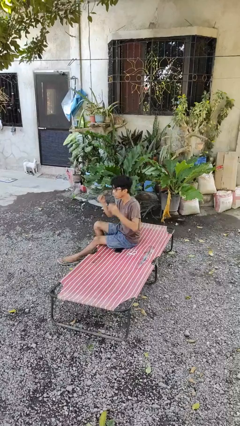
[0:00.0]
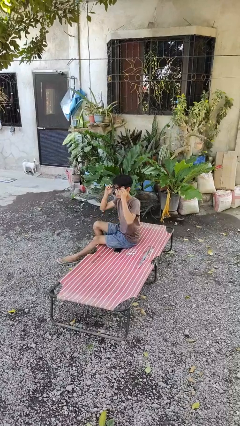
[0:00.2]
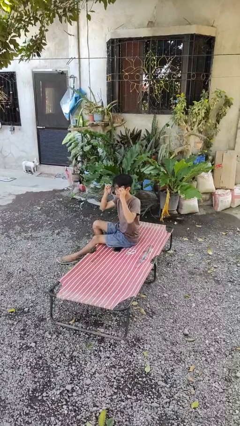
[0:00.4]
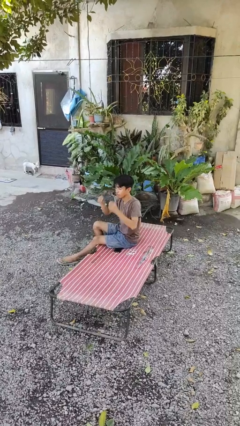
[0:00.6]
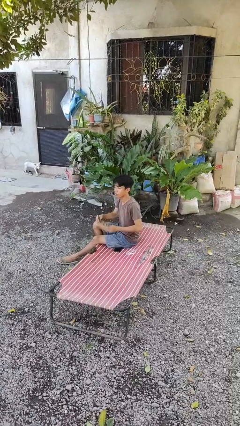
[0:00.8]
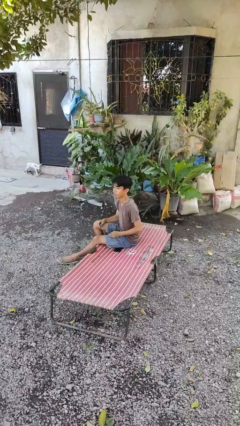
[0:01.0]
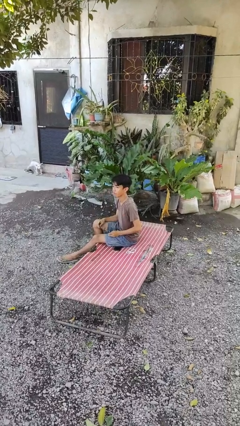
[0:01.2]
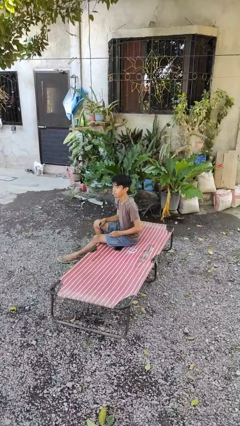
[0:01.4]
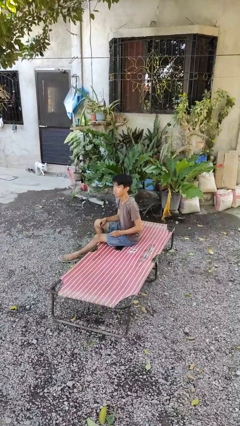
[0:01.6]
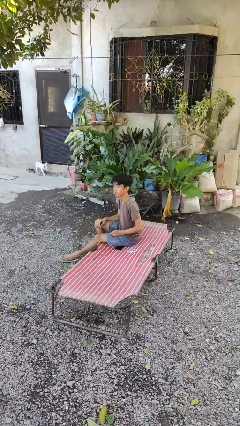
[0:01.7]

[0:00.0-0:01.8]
person takes off glasses

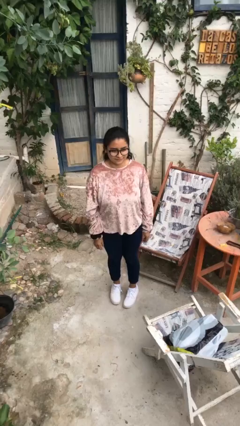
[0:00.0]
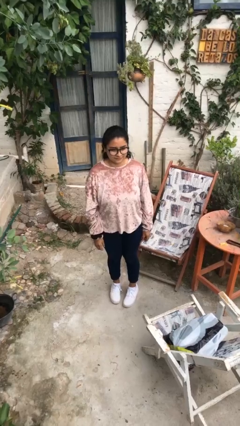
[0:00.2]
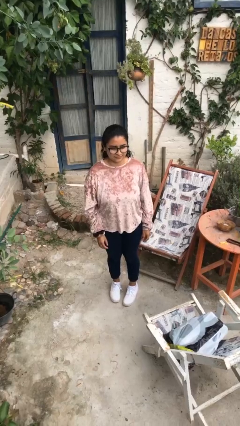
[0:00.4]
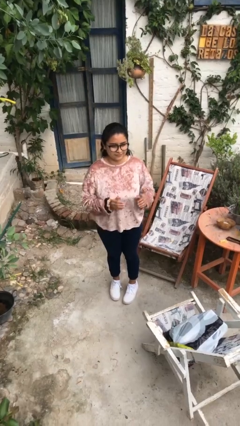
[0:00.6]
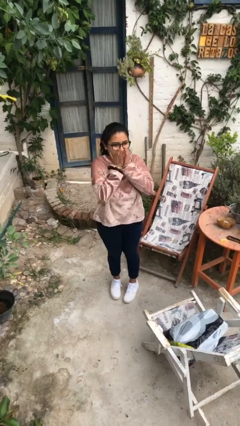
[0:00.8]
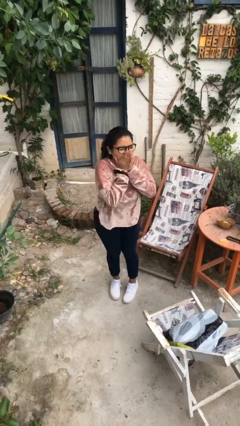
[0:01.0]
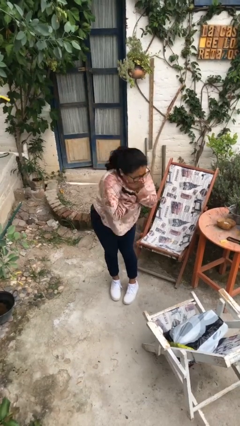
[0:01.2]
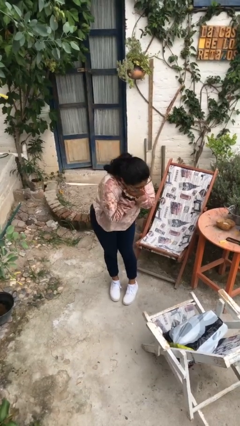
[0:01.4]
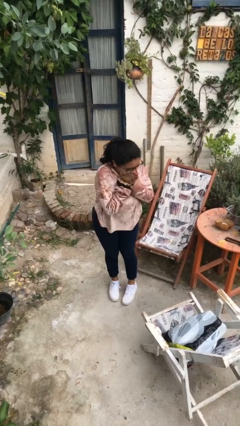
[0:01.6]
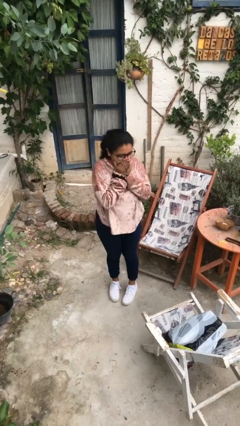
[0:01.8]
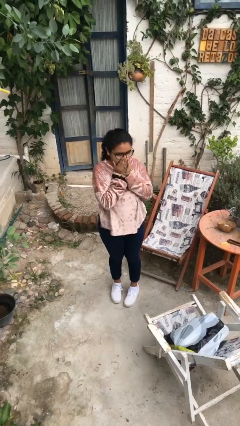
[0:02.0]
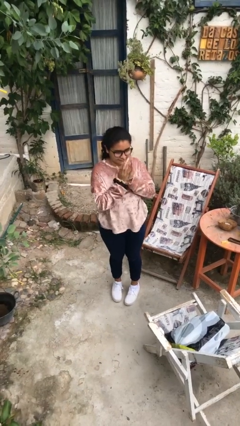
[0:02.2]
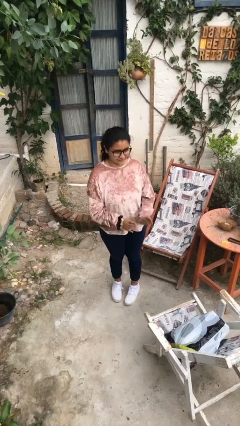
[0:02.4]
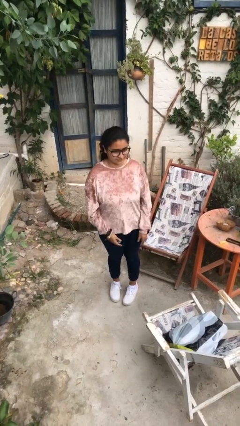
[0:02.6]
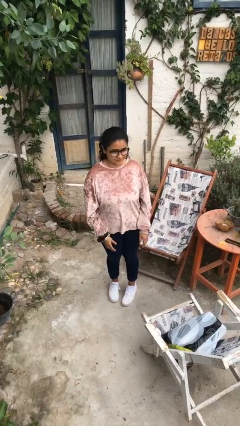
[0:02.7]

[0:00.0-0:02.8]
person sneezes into hand

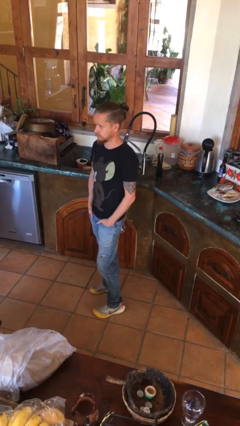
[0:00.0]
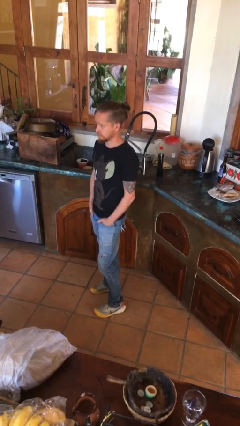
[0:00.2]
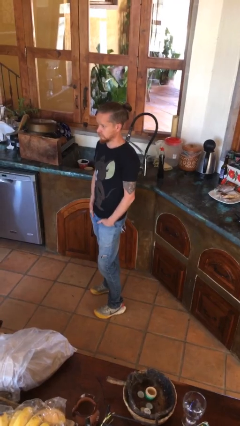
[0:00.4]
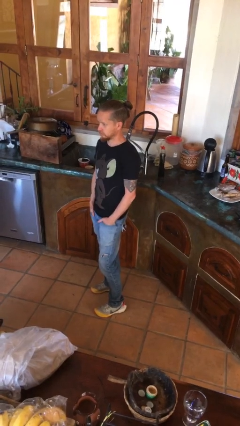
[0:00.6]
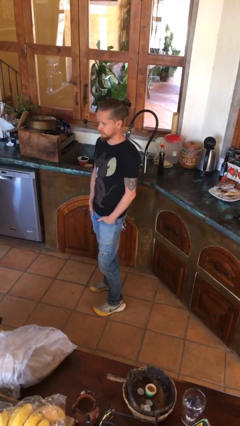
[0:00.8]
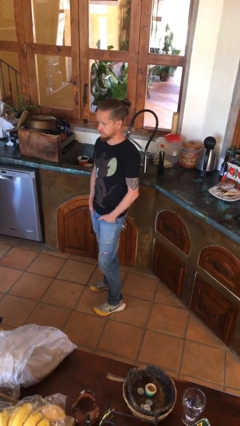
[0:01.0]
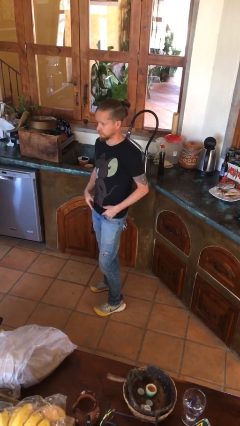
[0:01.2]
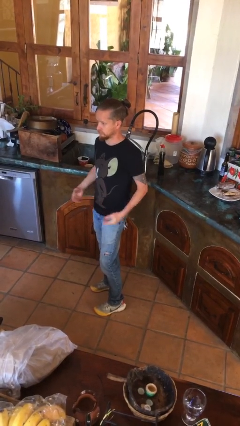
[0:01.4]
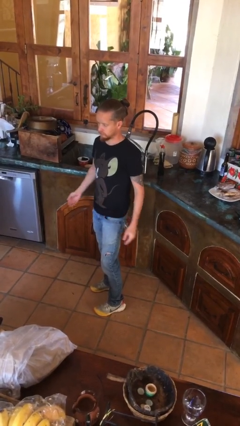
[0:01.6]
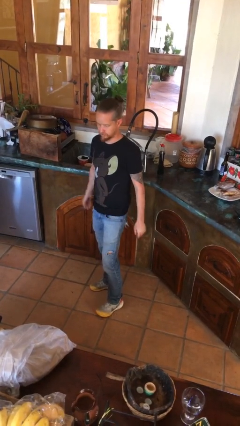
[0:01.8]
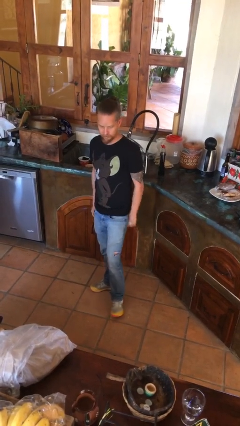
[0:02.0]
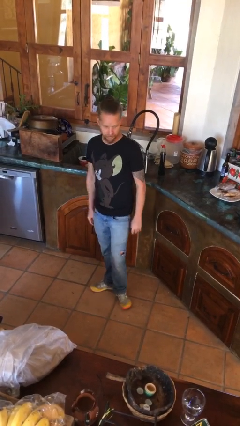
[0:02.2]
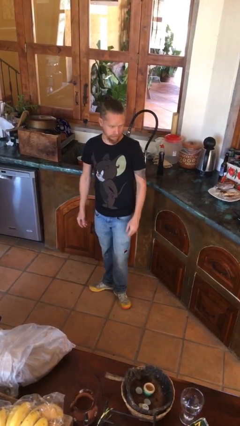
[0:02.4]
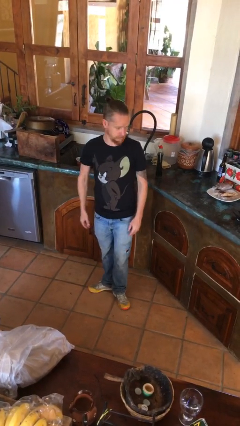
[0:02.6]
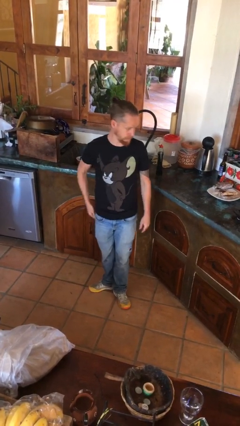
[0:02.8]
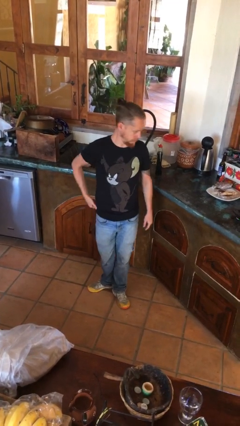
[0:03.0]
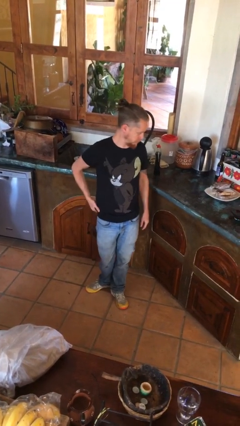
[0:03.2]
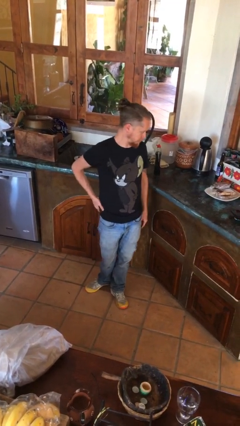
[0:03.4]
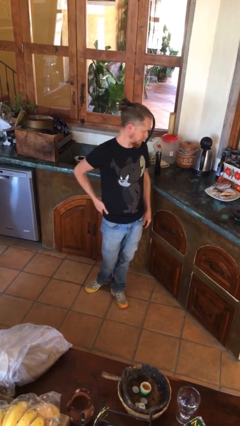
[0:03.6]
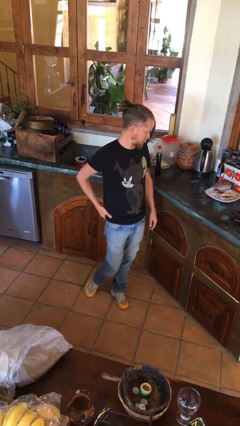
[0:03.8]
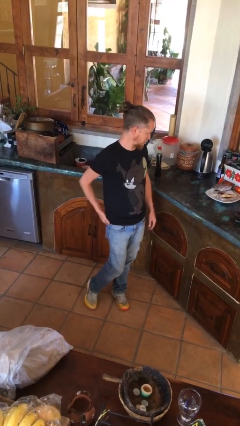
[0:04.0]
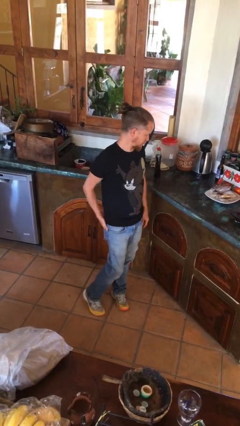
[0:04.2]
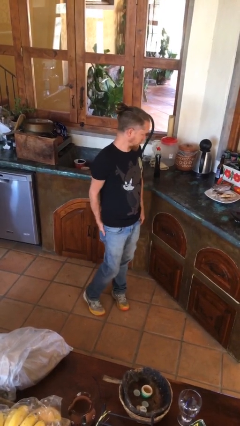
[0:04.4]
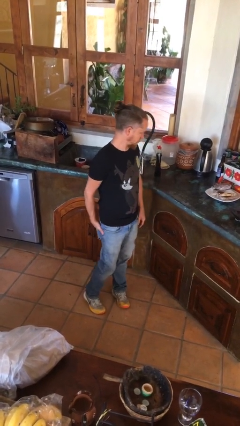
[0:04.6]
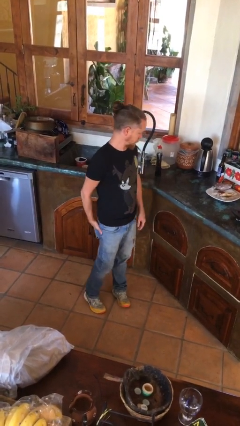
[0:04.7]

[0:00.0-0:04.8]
person puts hands in back pockets

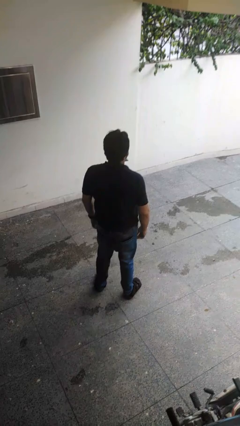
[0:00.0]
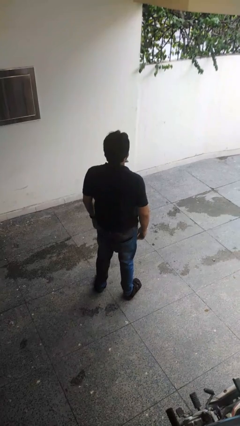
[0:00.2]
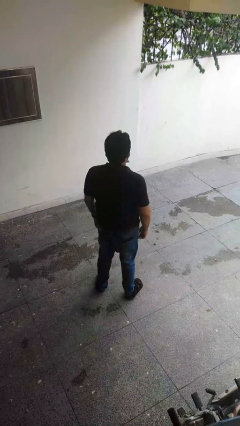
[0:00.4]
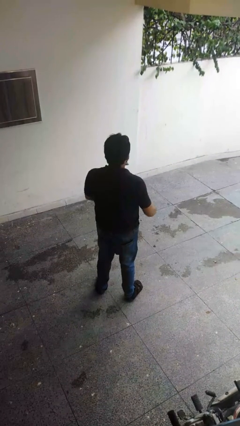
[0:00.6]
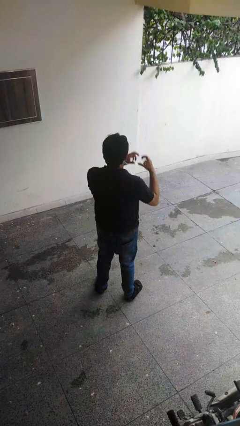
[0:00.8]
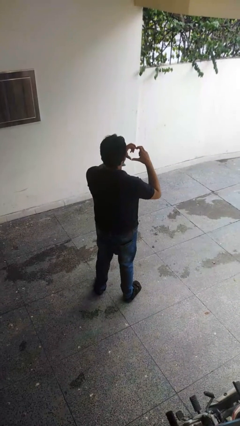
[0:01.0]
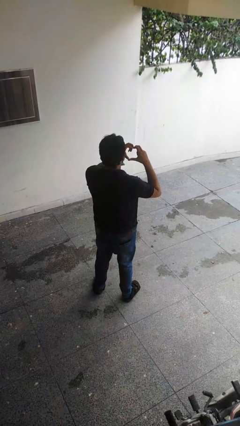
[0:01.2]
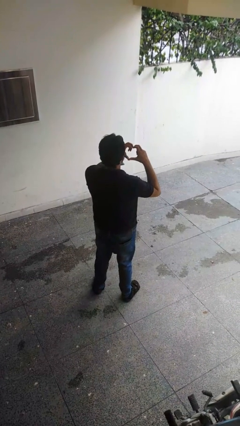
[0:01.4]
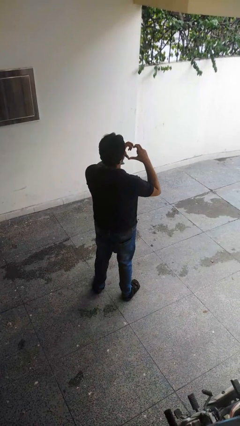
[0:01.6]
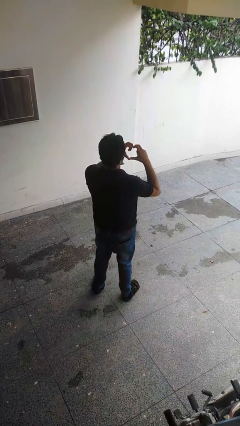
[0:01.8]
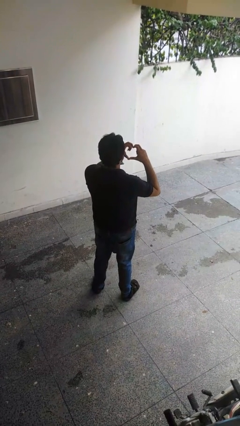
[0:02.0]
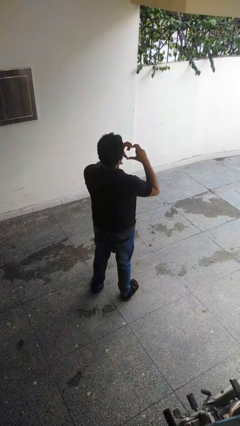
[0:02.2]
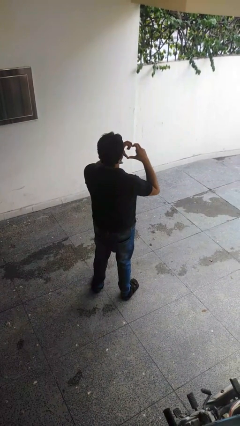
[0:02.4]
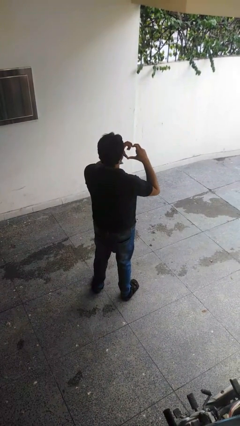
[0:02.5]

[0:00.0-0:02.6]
person gestures heart

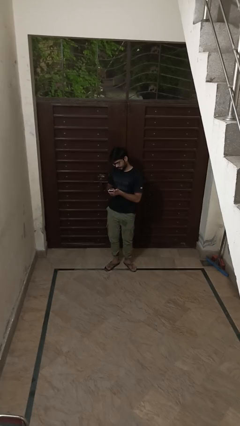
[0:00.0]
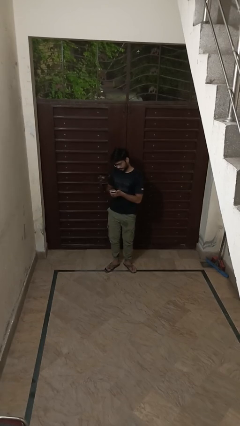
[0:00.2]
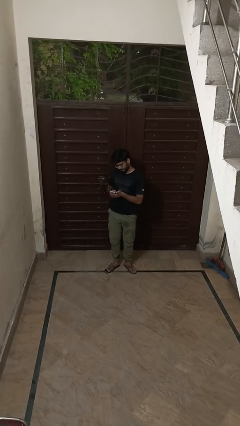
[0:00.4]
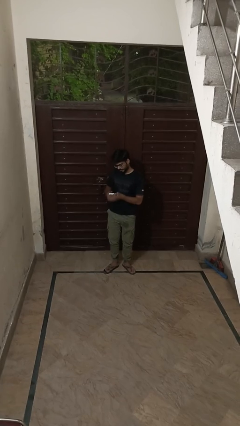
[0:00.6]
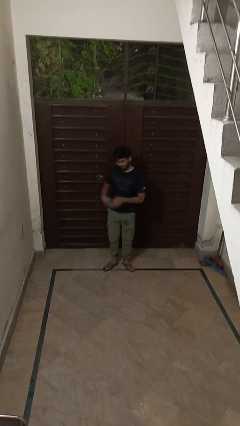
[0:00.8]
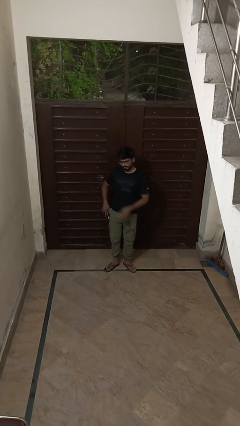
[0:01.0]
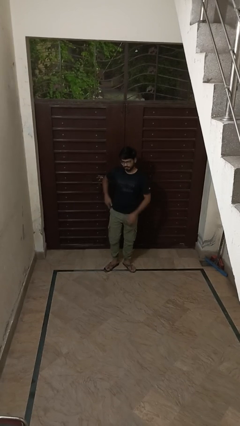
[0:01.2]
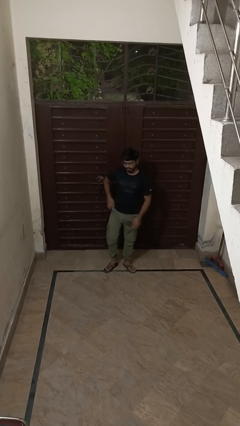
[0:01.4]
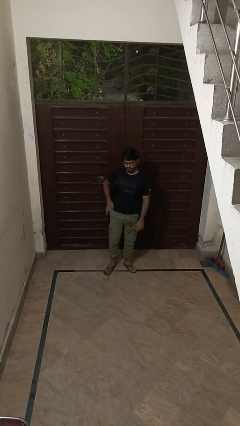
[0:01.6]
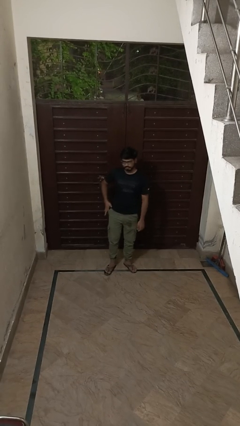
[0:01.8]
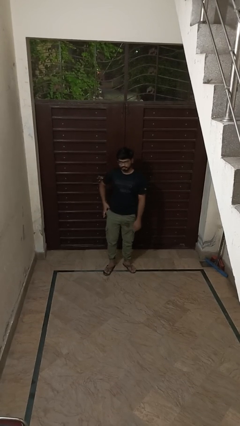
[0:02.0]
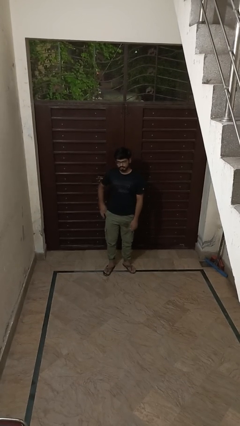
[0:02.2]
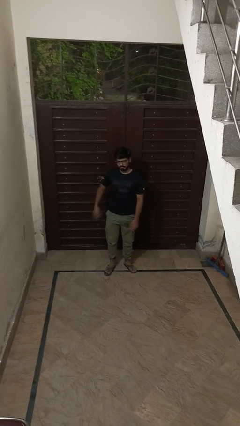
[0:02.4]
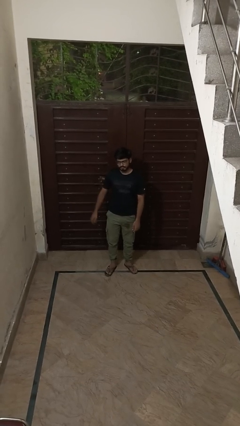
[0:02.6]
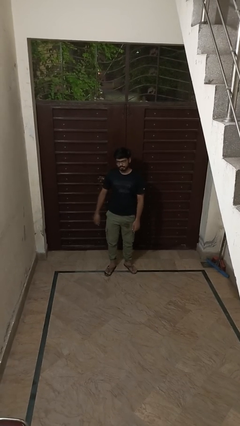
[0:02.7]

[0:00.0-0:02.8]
person puts phone into pocket

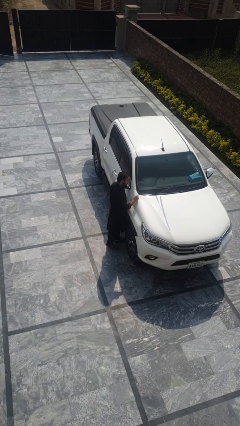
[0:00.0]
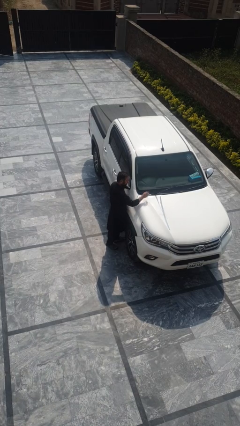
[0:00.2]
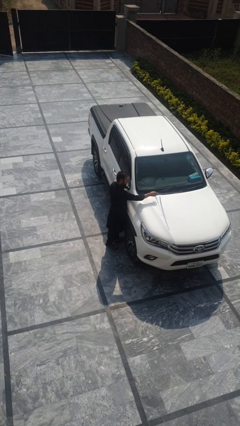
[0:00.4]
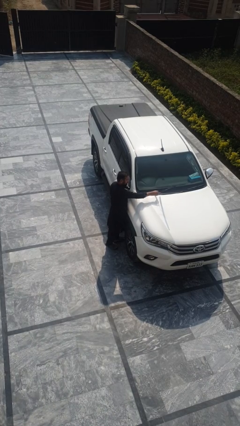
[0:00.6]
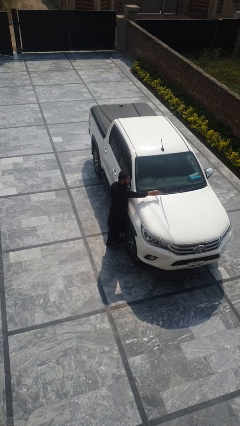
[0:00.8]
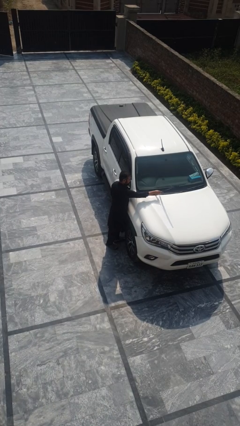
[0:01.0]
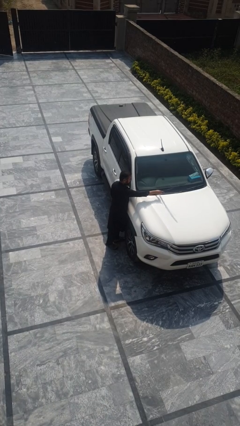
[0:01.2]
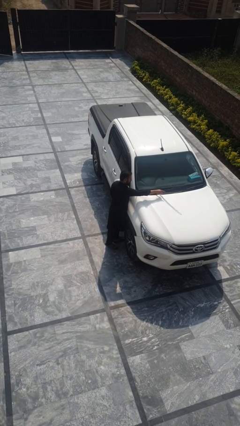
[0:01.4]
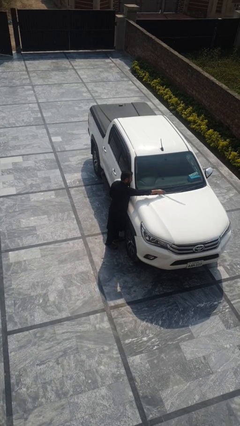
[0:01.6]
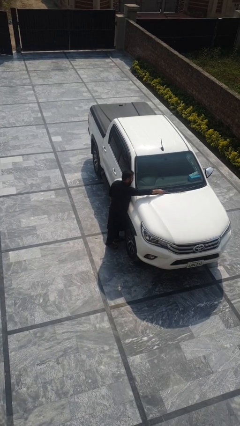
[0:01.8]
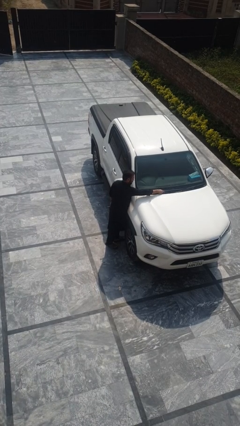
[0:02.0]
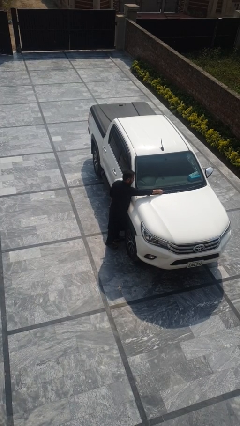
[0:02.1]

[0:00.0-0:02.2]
person flips down car wipers

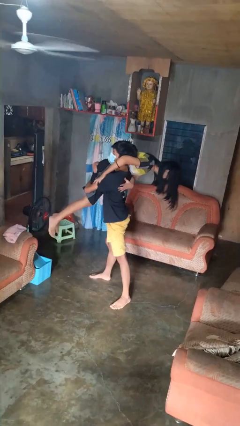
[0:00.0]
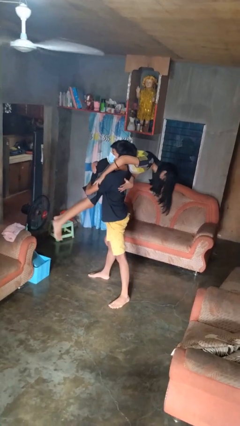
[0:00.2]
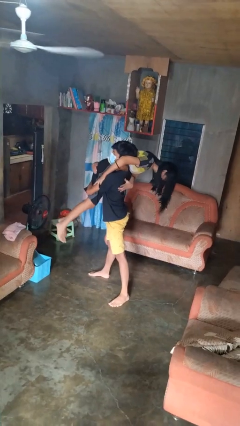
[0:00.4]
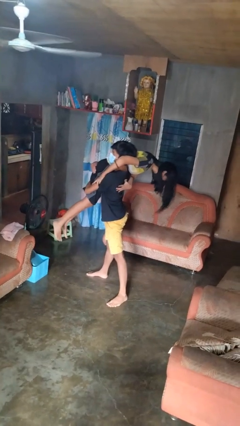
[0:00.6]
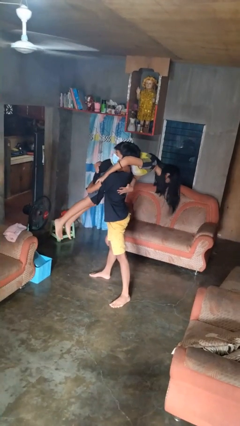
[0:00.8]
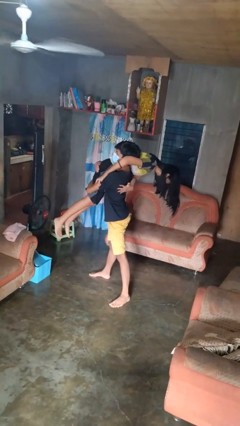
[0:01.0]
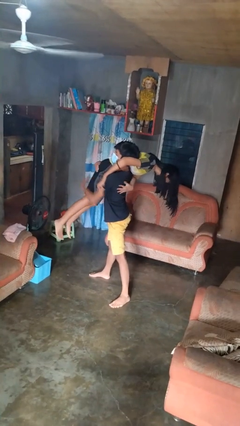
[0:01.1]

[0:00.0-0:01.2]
person puts down person
